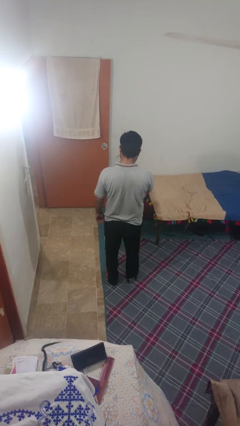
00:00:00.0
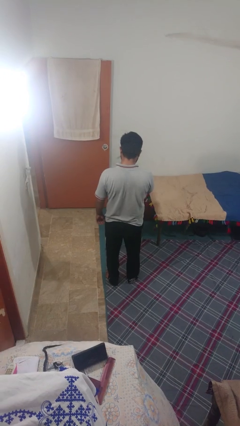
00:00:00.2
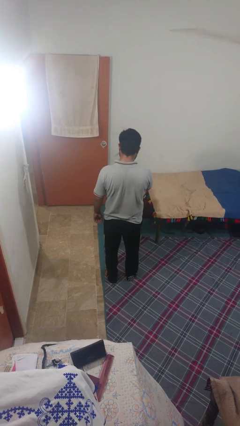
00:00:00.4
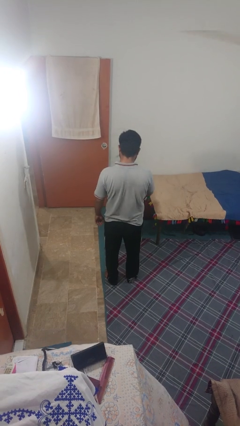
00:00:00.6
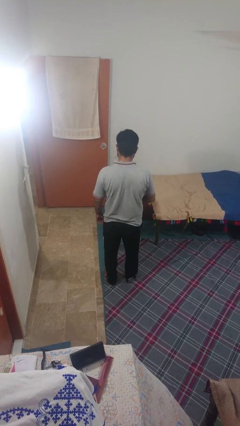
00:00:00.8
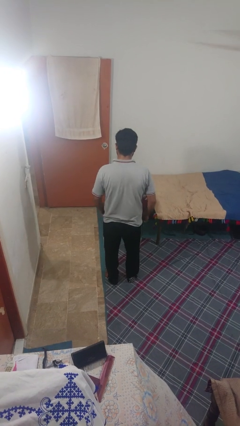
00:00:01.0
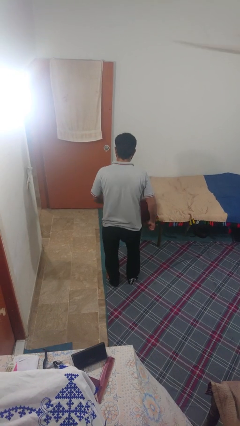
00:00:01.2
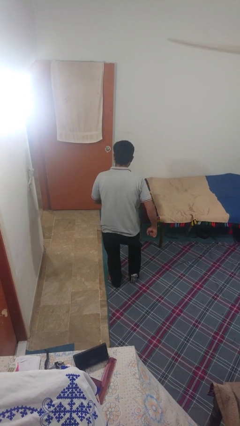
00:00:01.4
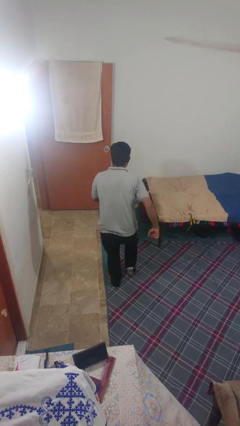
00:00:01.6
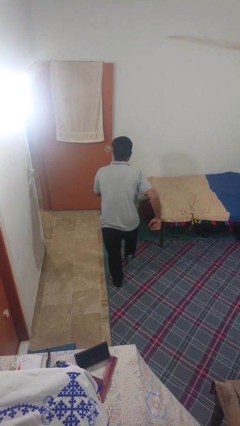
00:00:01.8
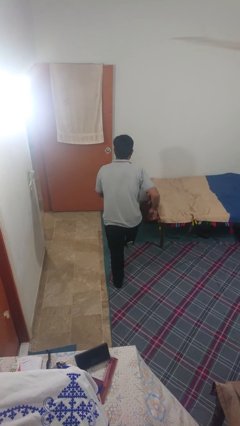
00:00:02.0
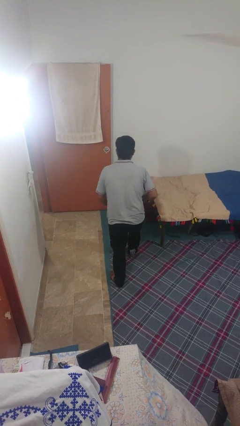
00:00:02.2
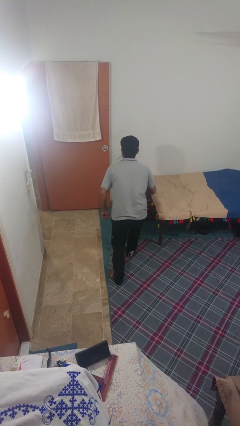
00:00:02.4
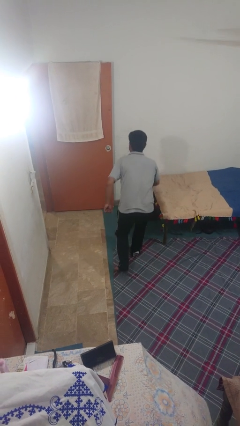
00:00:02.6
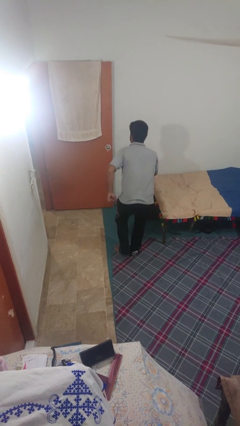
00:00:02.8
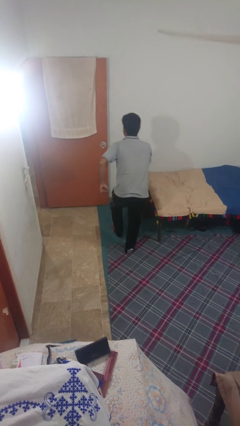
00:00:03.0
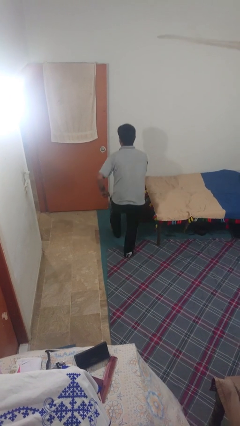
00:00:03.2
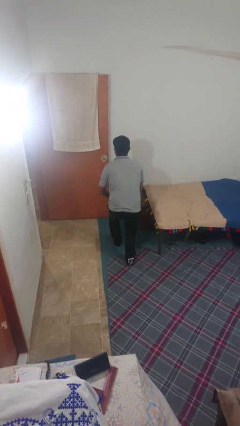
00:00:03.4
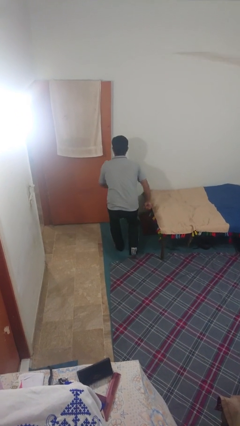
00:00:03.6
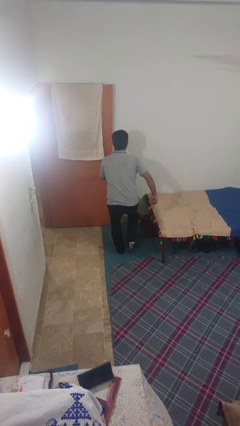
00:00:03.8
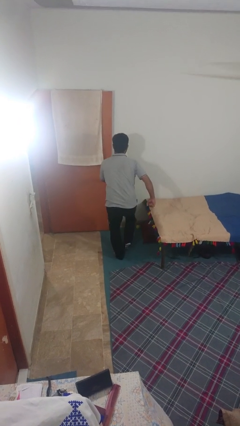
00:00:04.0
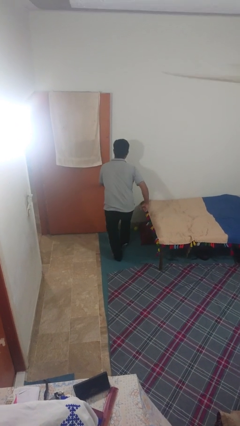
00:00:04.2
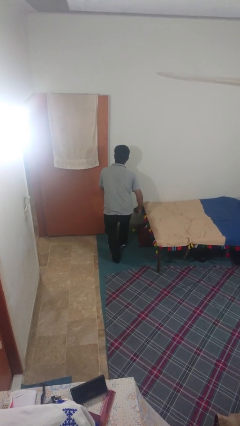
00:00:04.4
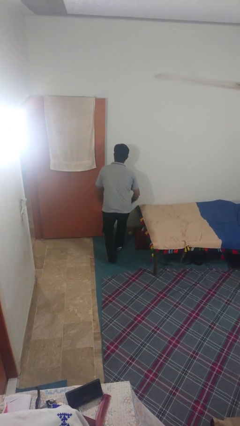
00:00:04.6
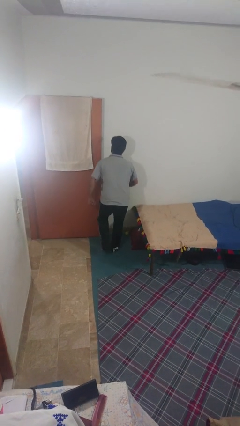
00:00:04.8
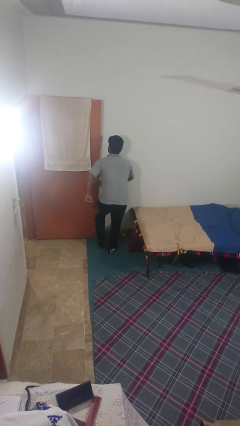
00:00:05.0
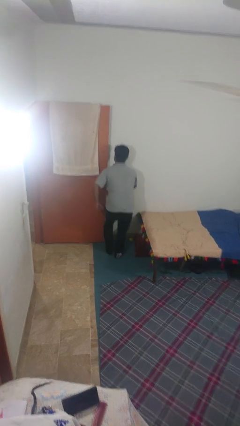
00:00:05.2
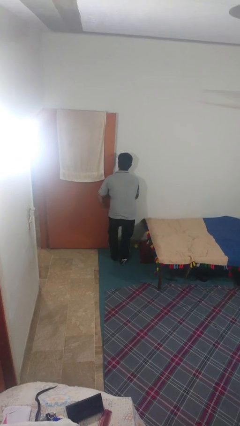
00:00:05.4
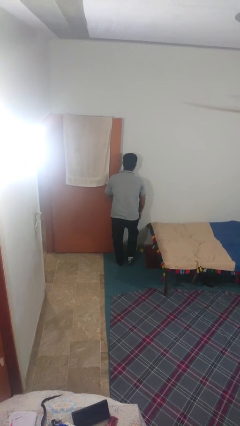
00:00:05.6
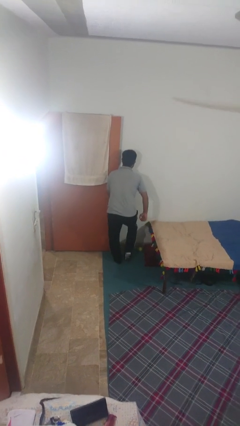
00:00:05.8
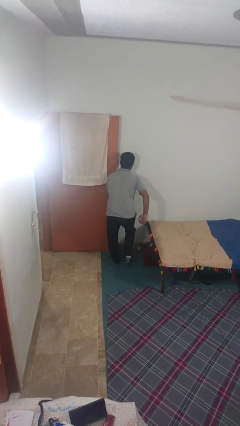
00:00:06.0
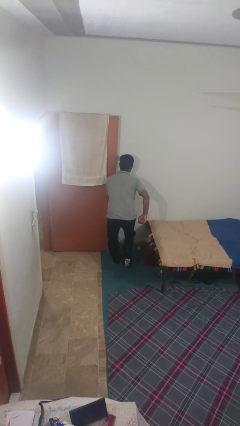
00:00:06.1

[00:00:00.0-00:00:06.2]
person walks tiptoe

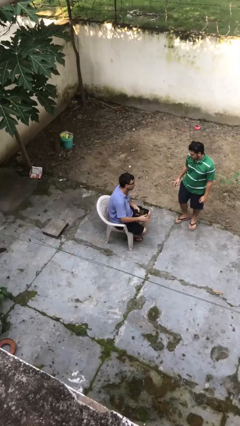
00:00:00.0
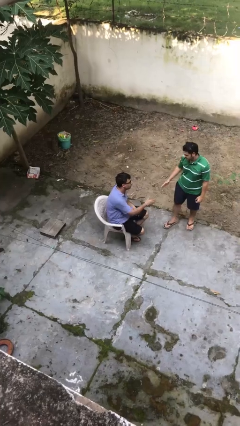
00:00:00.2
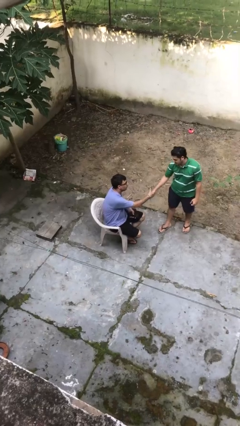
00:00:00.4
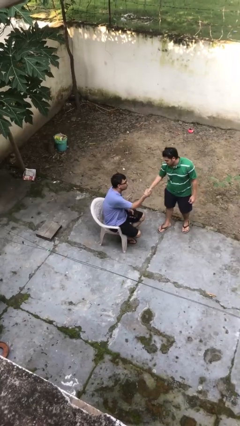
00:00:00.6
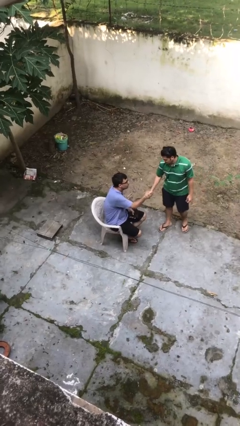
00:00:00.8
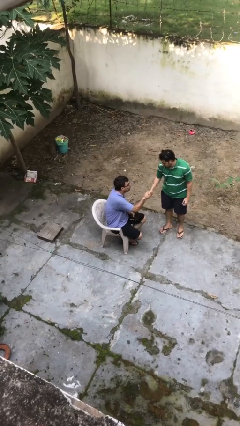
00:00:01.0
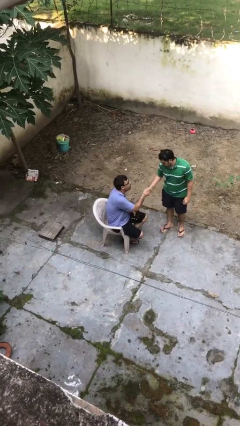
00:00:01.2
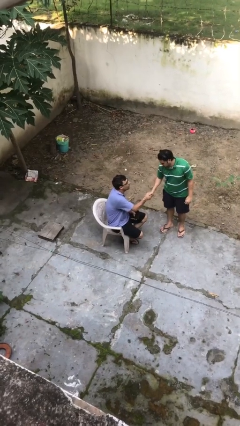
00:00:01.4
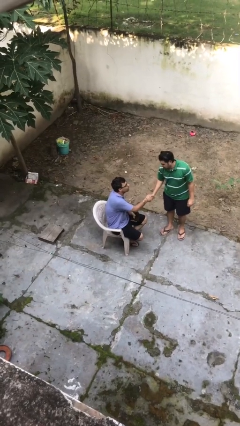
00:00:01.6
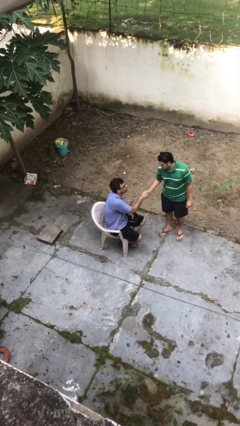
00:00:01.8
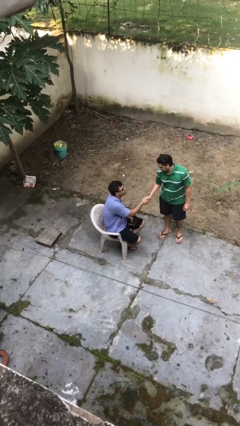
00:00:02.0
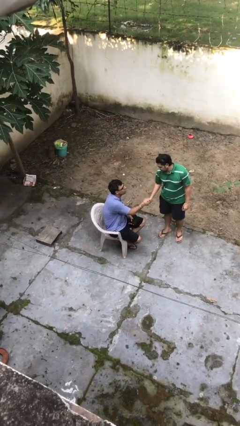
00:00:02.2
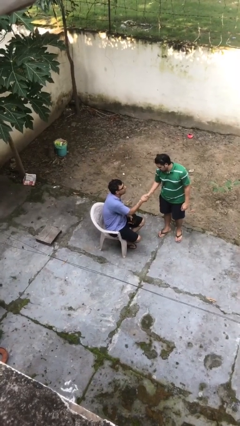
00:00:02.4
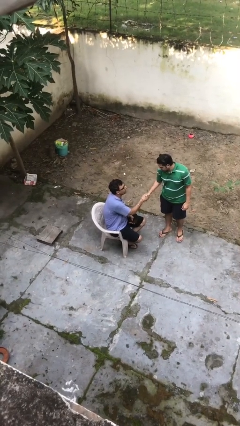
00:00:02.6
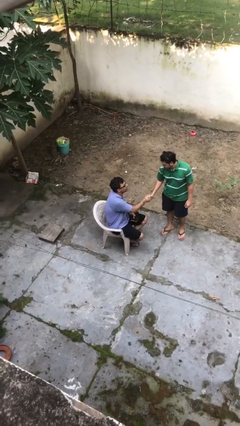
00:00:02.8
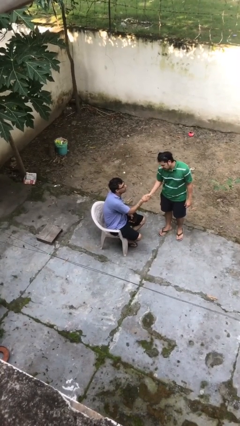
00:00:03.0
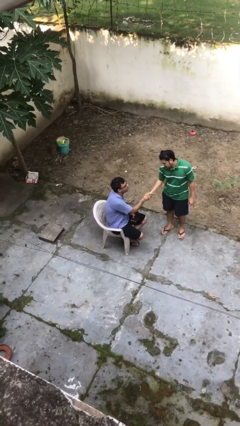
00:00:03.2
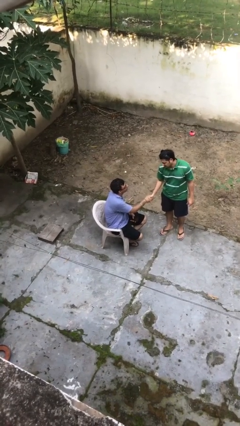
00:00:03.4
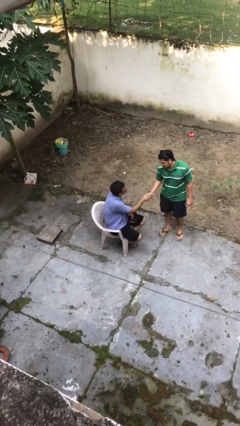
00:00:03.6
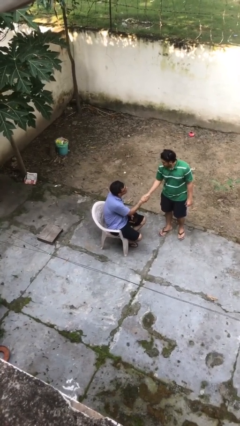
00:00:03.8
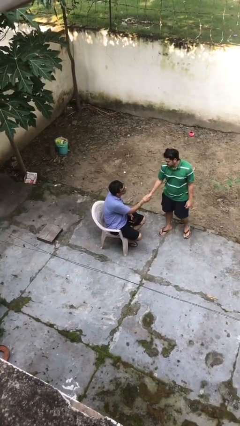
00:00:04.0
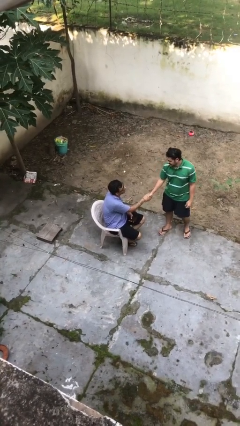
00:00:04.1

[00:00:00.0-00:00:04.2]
person shakes hand

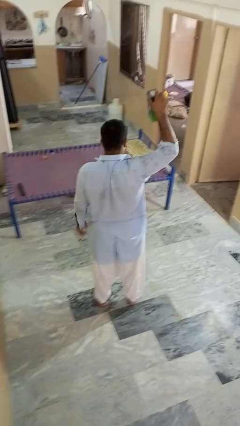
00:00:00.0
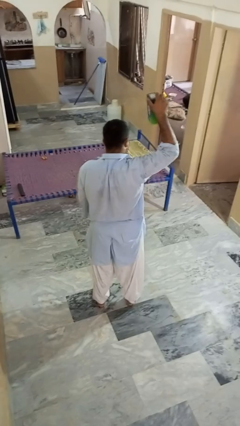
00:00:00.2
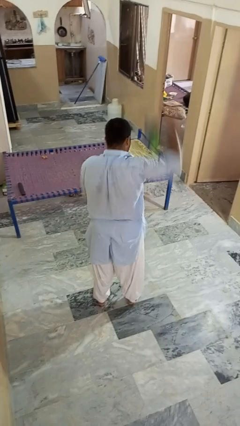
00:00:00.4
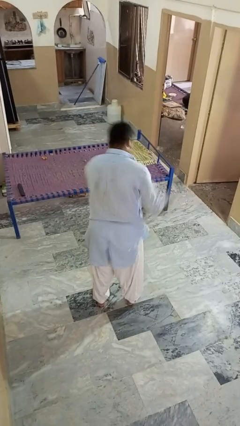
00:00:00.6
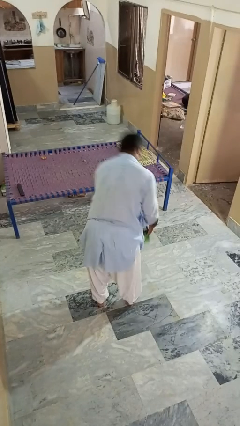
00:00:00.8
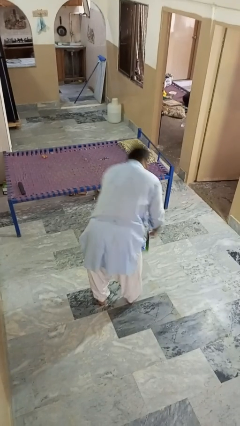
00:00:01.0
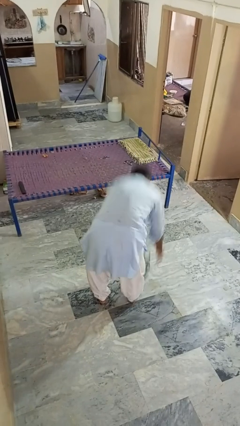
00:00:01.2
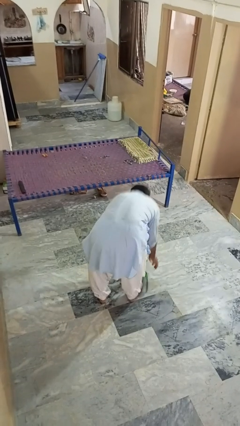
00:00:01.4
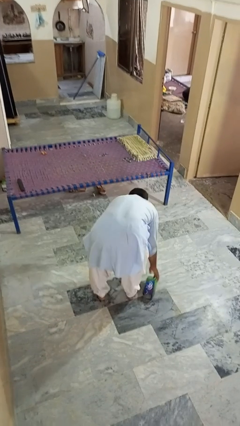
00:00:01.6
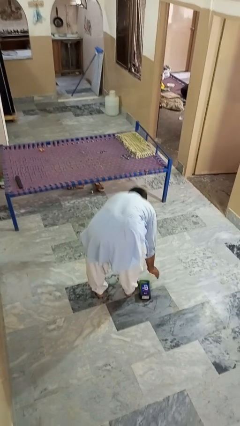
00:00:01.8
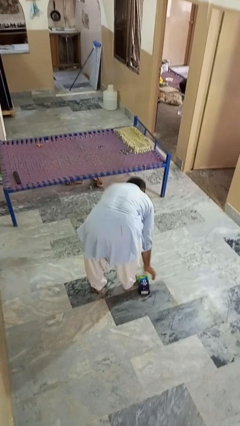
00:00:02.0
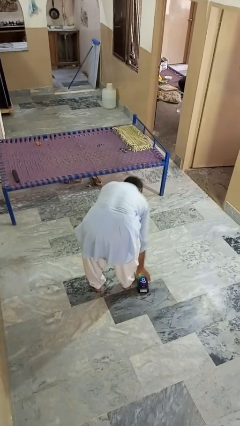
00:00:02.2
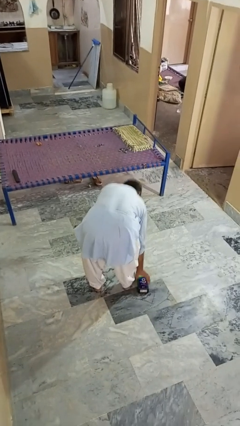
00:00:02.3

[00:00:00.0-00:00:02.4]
person catches dropped object

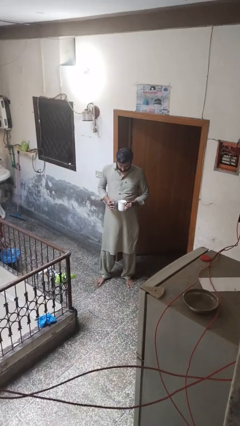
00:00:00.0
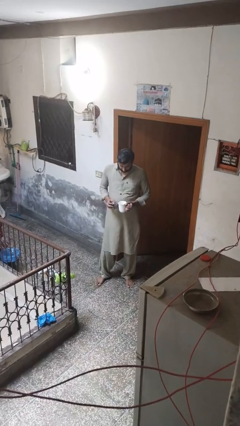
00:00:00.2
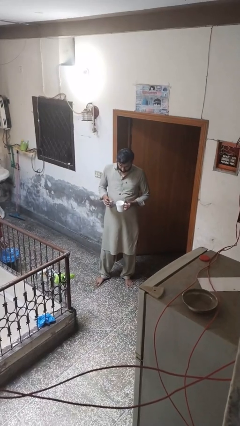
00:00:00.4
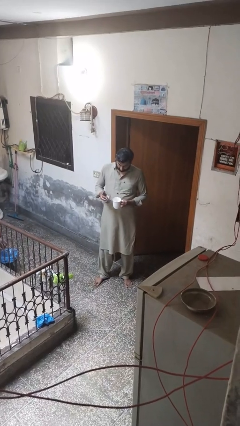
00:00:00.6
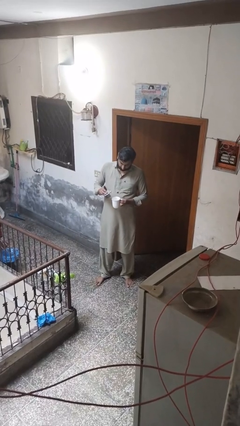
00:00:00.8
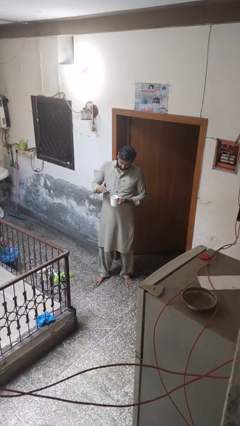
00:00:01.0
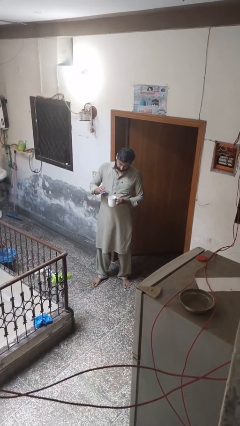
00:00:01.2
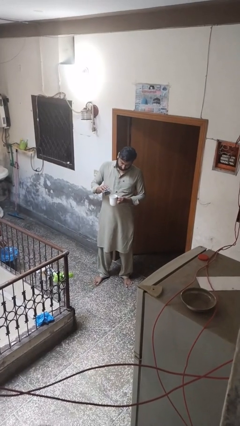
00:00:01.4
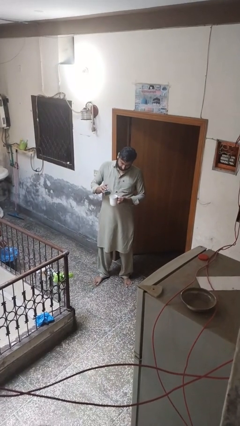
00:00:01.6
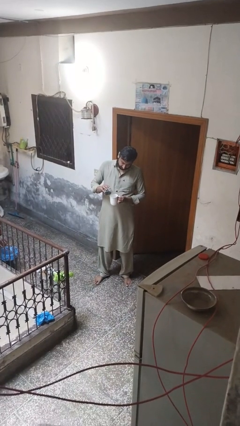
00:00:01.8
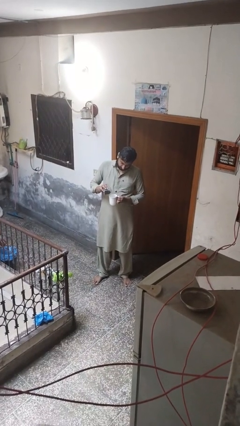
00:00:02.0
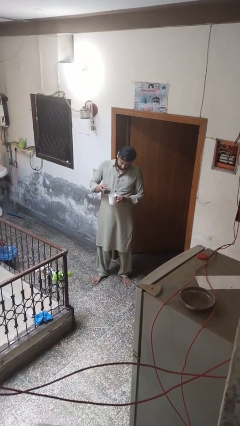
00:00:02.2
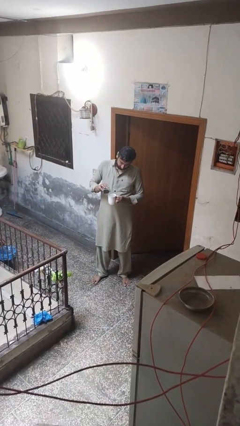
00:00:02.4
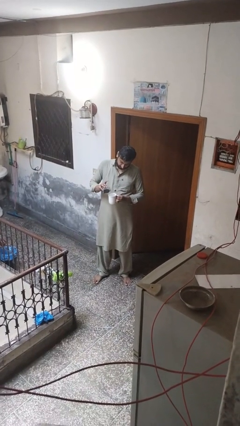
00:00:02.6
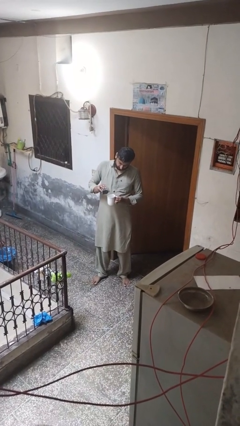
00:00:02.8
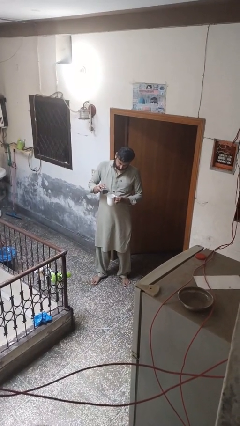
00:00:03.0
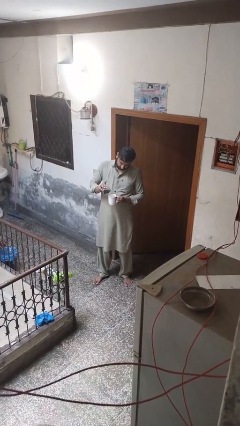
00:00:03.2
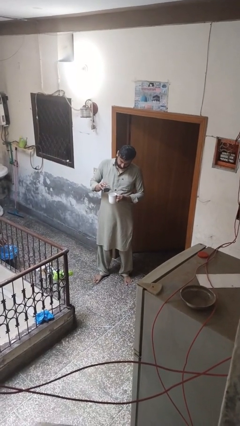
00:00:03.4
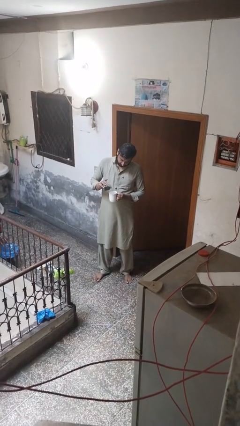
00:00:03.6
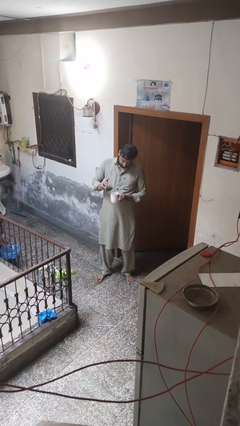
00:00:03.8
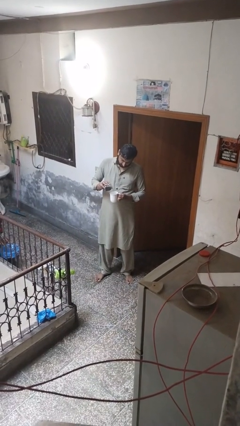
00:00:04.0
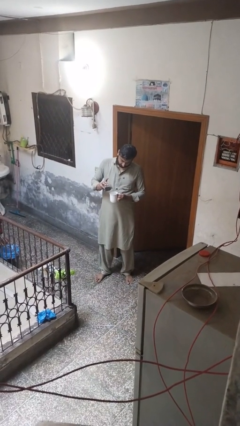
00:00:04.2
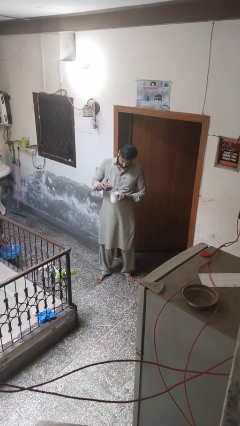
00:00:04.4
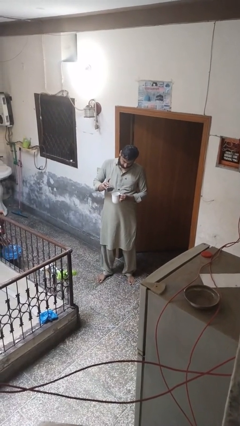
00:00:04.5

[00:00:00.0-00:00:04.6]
person pours coffee into mug

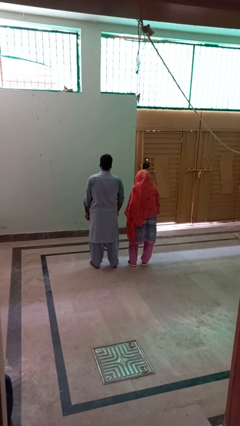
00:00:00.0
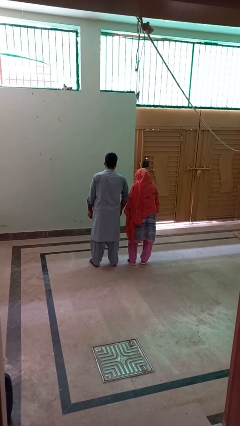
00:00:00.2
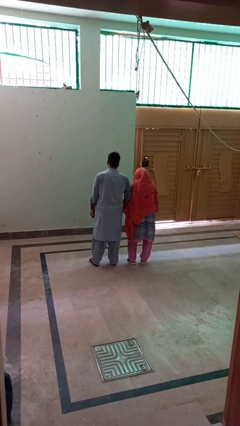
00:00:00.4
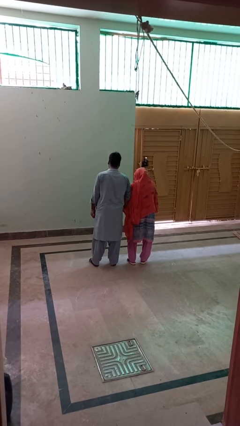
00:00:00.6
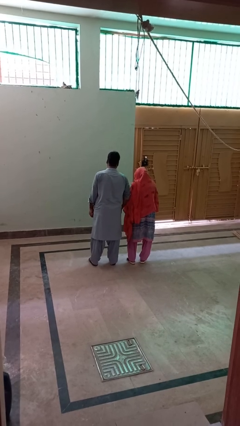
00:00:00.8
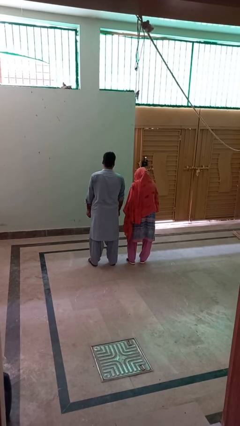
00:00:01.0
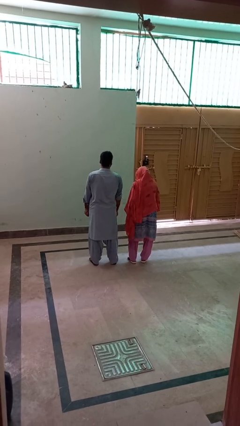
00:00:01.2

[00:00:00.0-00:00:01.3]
person nudges person with elbow
